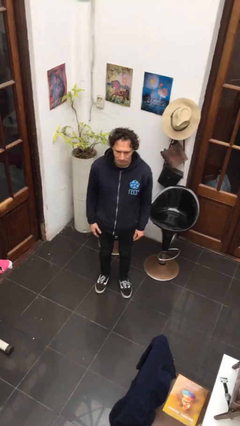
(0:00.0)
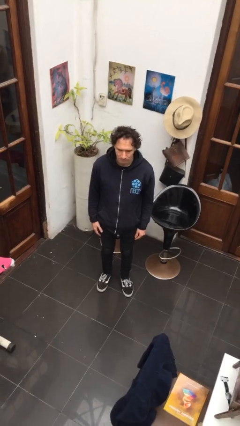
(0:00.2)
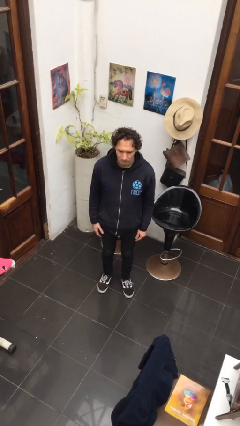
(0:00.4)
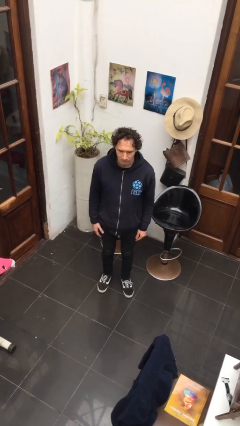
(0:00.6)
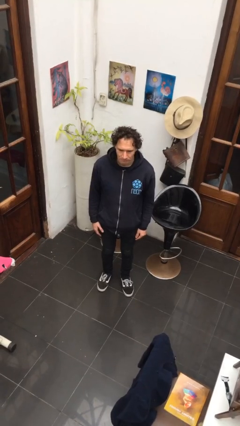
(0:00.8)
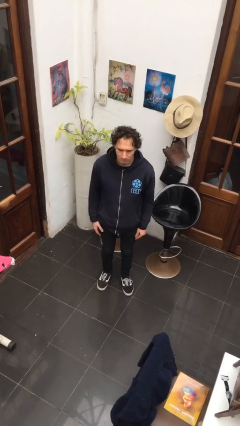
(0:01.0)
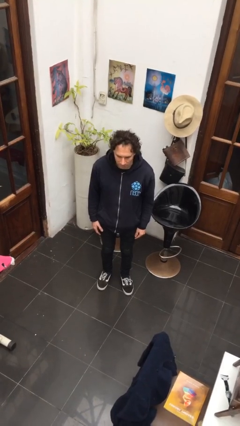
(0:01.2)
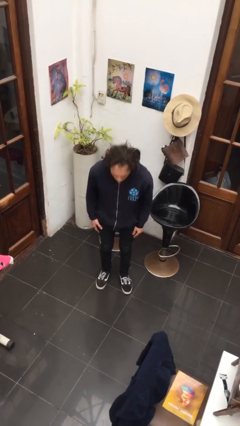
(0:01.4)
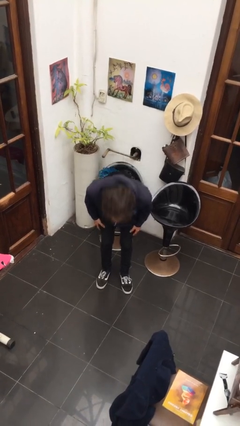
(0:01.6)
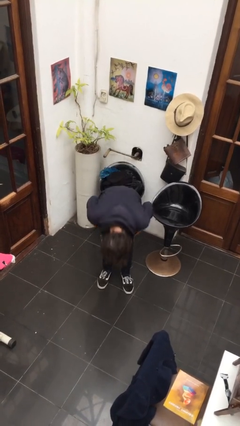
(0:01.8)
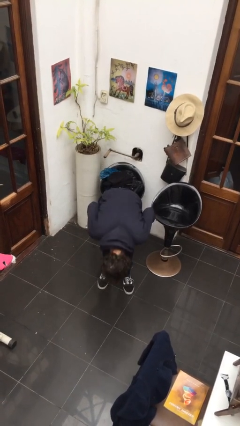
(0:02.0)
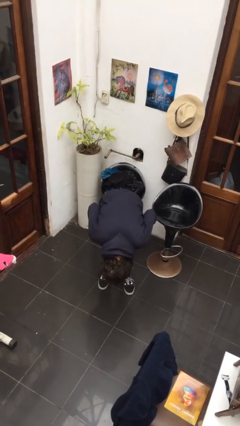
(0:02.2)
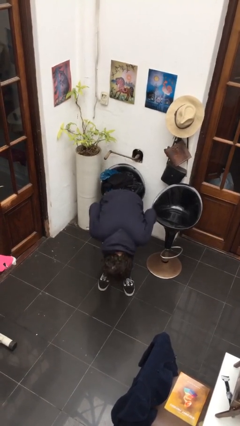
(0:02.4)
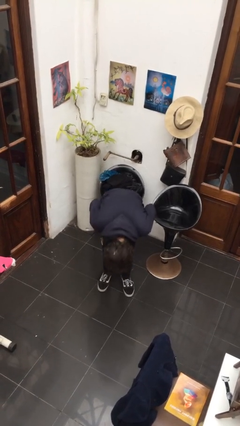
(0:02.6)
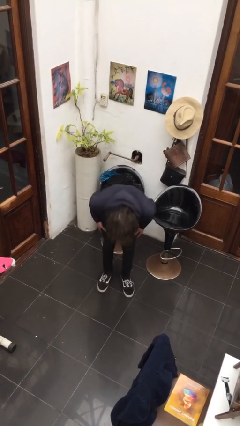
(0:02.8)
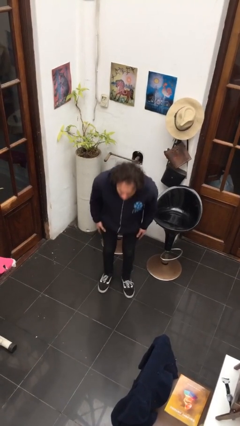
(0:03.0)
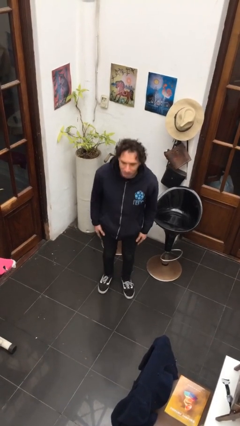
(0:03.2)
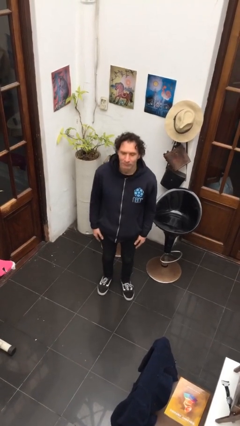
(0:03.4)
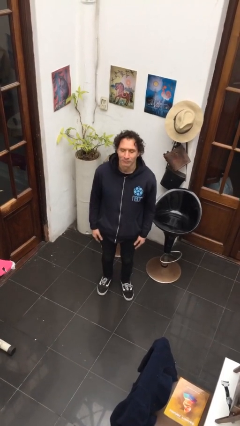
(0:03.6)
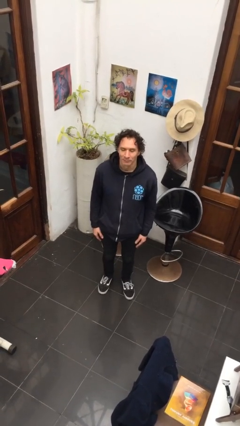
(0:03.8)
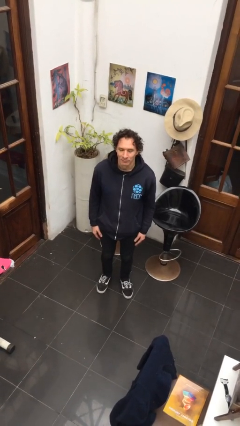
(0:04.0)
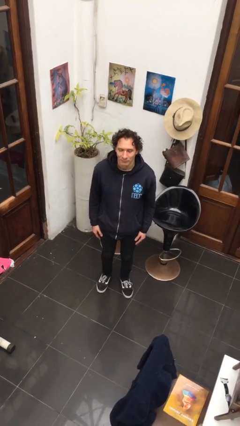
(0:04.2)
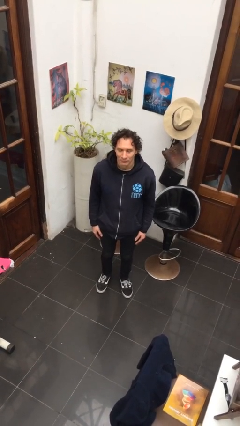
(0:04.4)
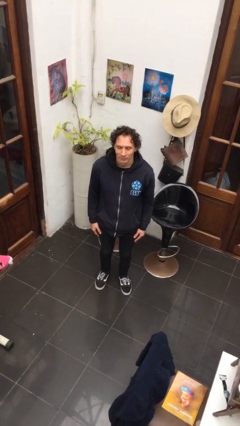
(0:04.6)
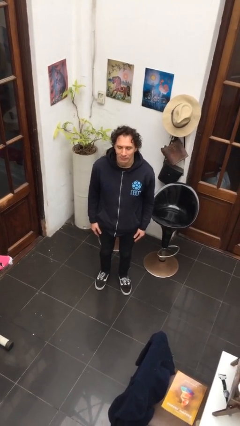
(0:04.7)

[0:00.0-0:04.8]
person bows

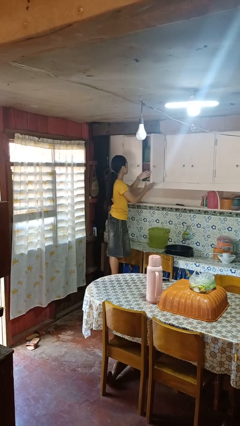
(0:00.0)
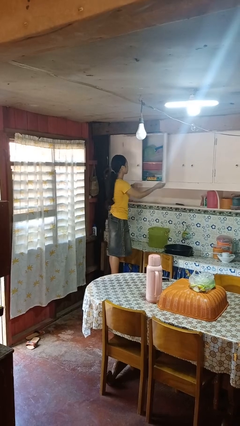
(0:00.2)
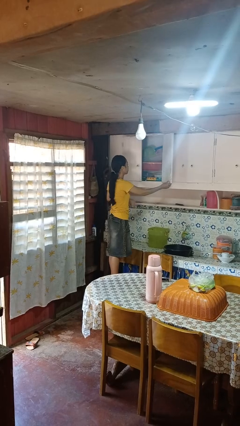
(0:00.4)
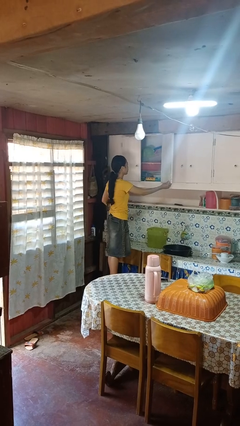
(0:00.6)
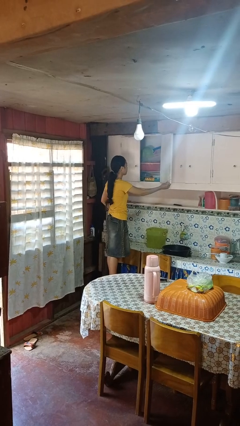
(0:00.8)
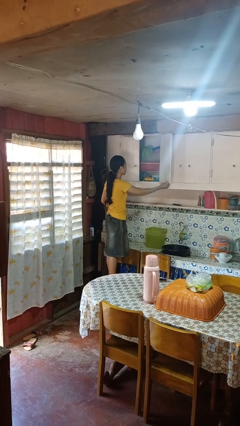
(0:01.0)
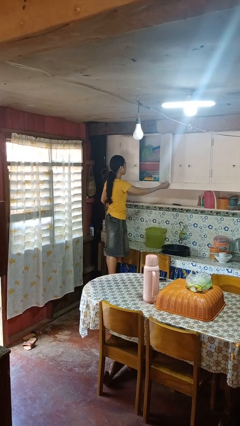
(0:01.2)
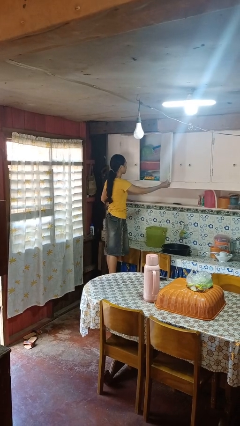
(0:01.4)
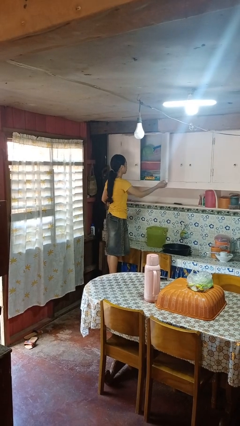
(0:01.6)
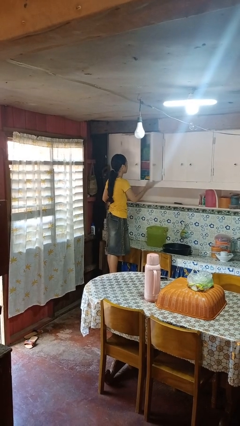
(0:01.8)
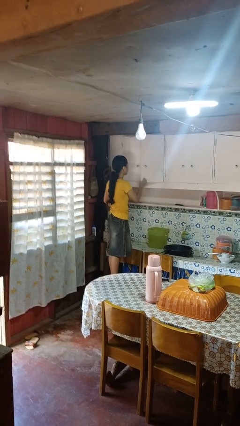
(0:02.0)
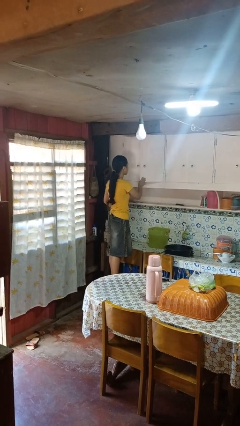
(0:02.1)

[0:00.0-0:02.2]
person opens cabinet

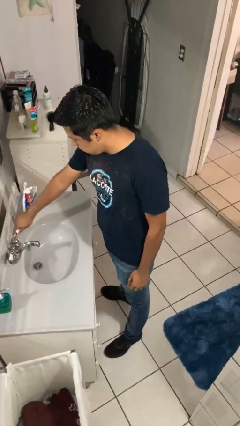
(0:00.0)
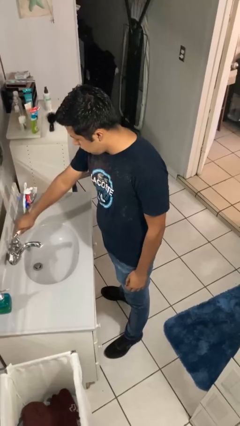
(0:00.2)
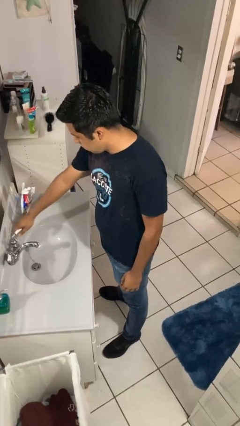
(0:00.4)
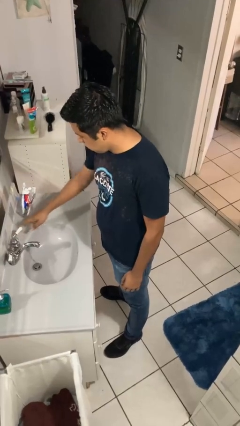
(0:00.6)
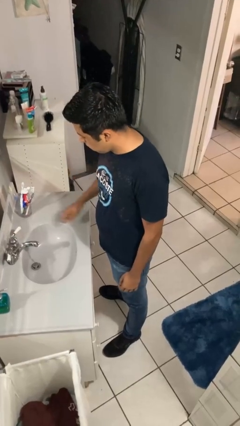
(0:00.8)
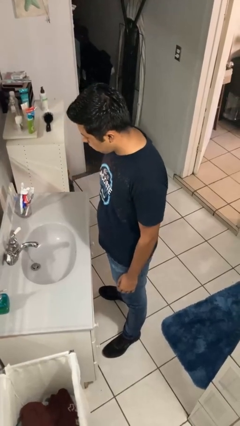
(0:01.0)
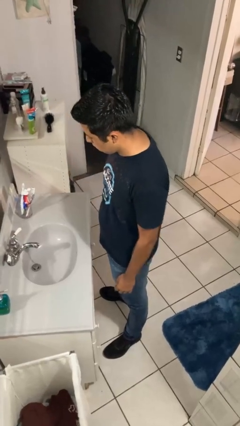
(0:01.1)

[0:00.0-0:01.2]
person turns on faucet

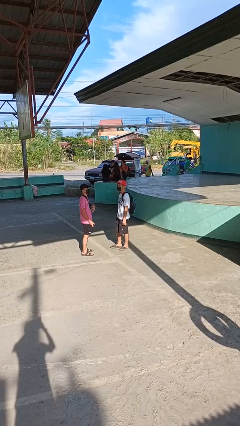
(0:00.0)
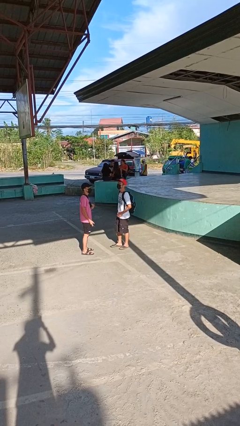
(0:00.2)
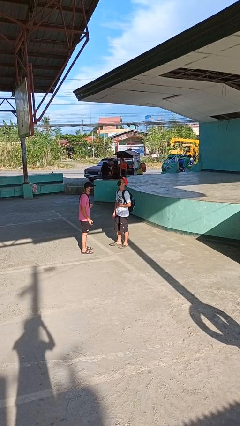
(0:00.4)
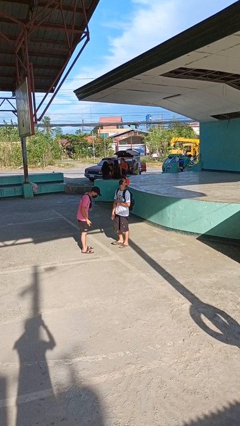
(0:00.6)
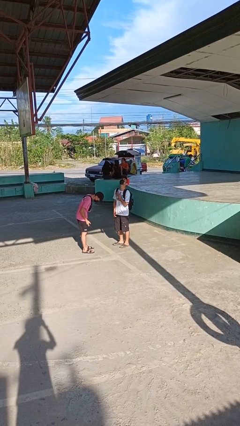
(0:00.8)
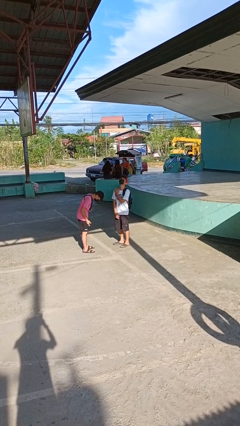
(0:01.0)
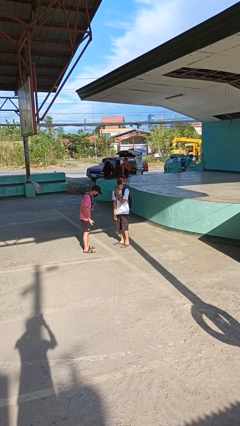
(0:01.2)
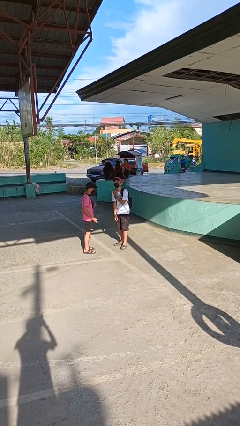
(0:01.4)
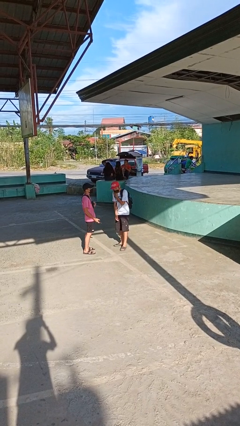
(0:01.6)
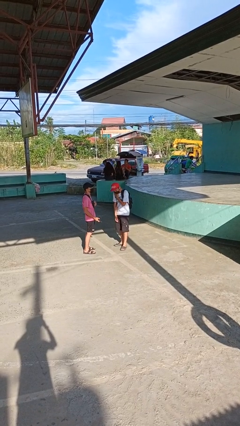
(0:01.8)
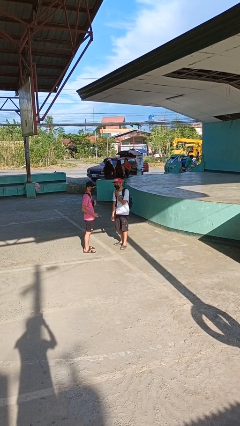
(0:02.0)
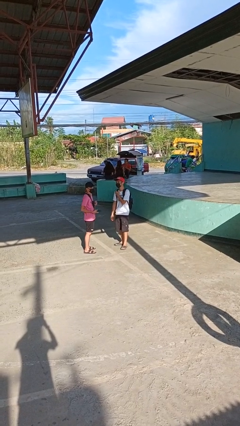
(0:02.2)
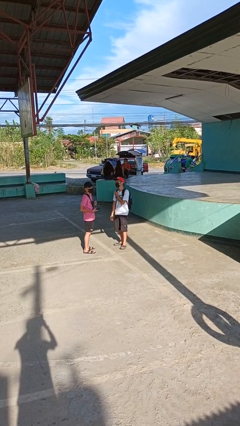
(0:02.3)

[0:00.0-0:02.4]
person laughs with person

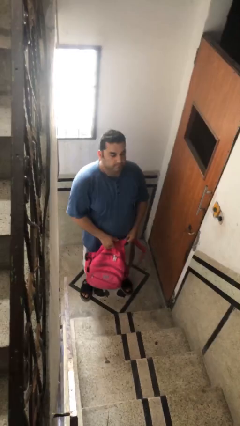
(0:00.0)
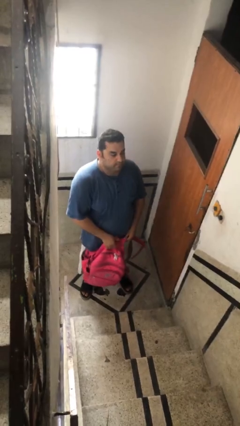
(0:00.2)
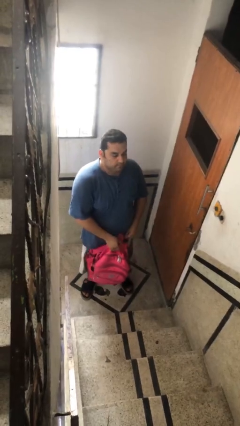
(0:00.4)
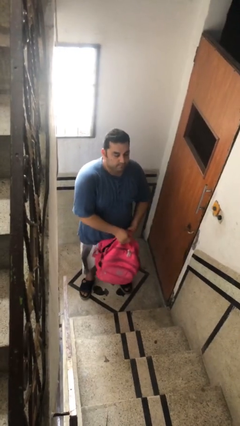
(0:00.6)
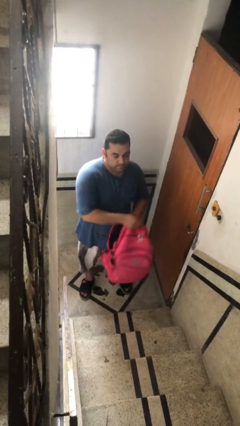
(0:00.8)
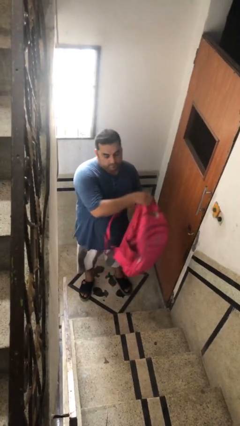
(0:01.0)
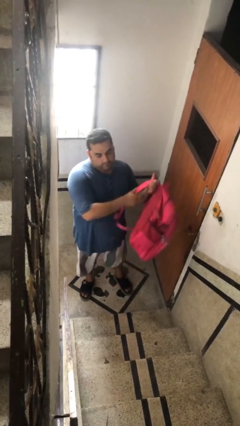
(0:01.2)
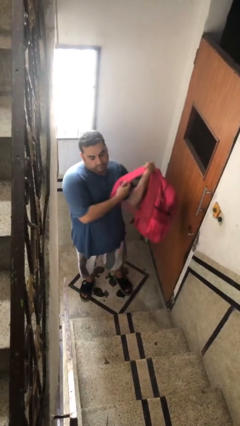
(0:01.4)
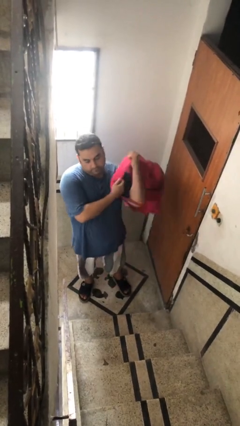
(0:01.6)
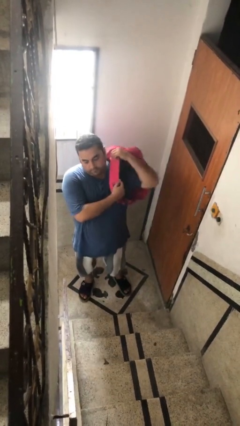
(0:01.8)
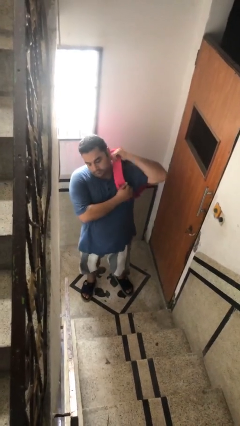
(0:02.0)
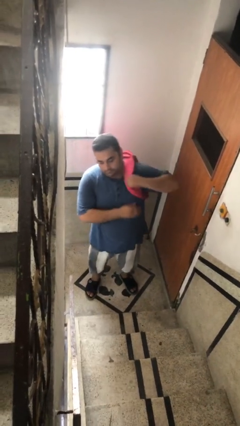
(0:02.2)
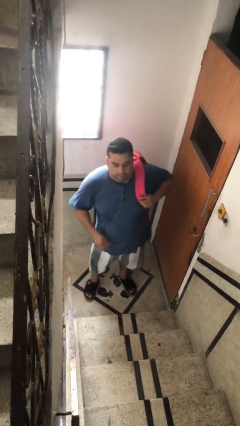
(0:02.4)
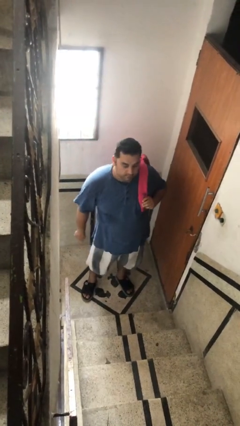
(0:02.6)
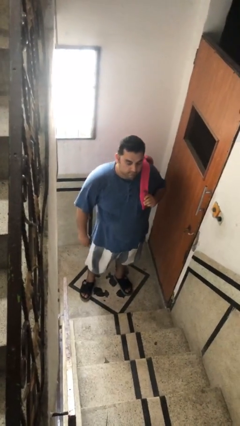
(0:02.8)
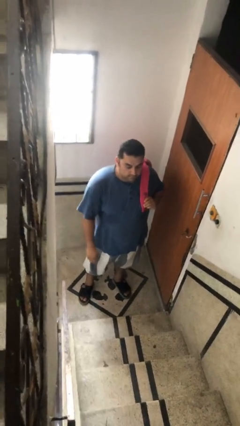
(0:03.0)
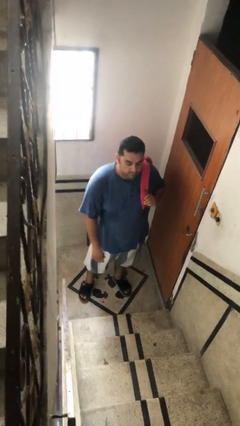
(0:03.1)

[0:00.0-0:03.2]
person puts on backpack

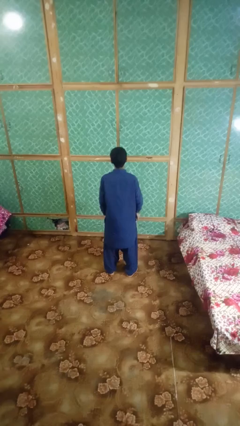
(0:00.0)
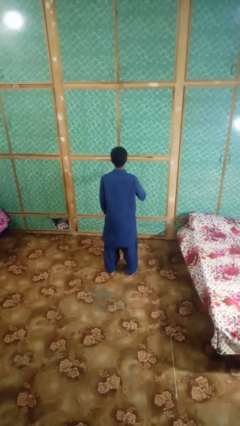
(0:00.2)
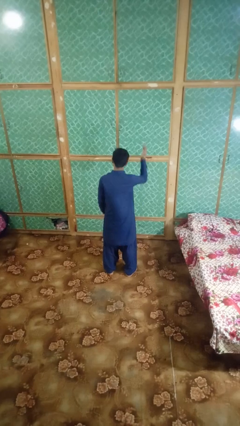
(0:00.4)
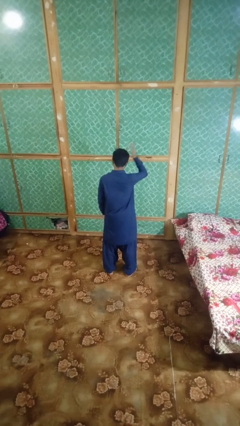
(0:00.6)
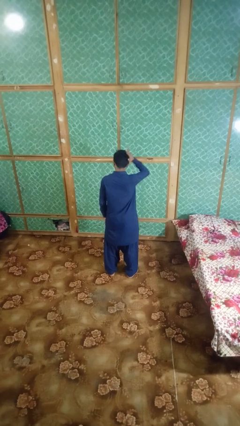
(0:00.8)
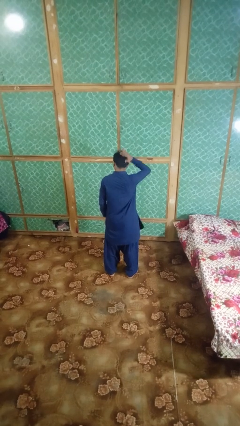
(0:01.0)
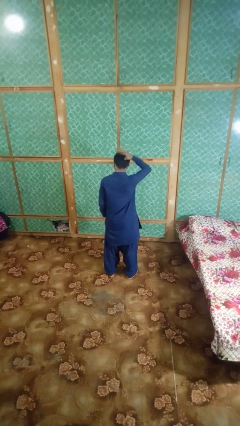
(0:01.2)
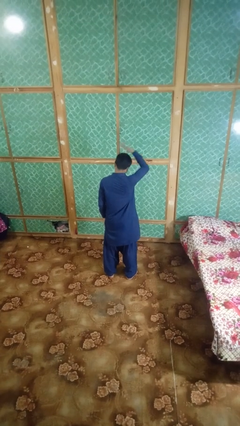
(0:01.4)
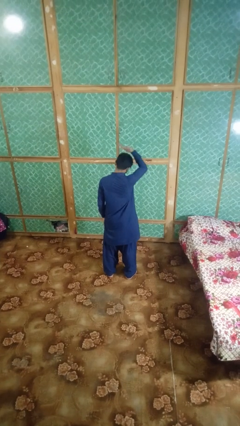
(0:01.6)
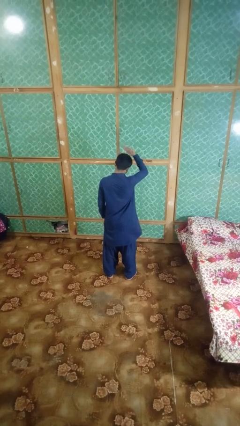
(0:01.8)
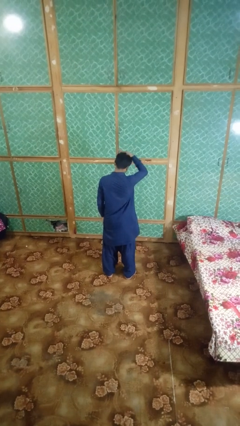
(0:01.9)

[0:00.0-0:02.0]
person pats head

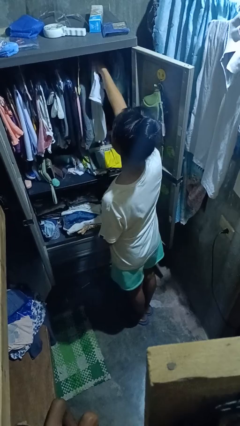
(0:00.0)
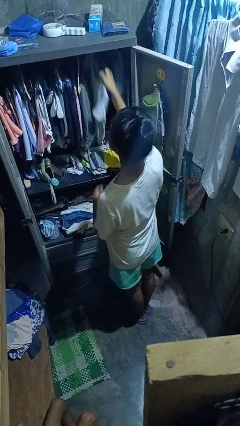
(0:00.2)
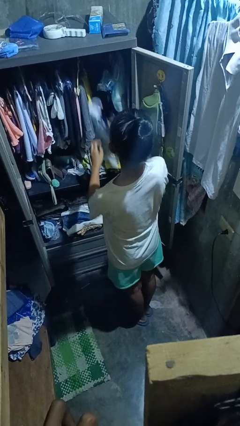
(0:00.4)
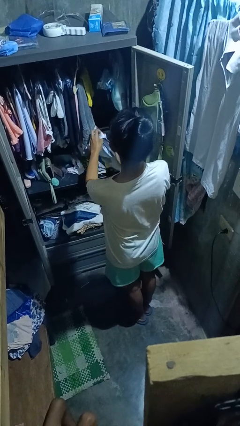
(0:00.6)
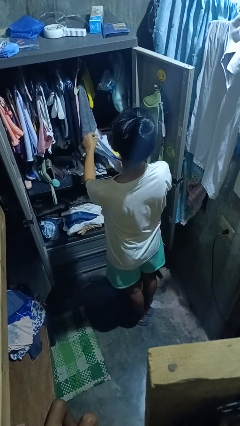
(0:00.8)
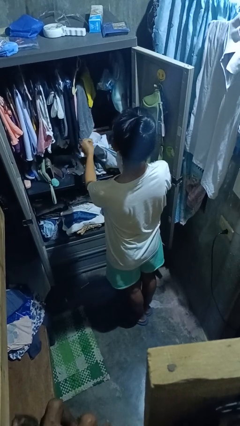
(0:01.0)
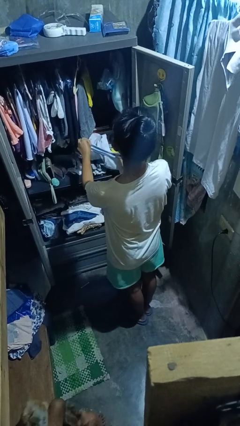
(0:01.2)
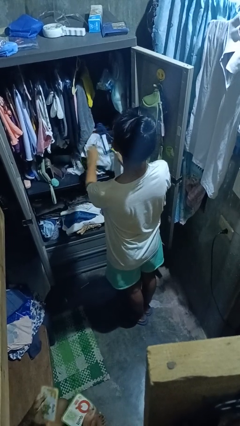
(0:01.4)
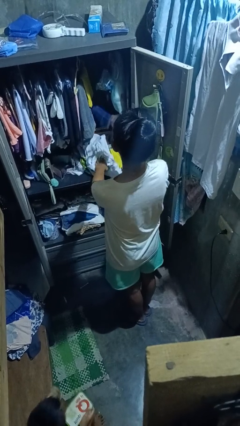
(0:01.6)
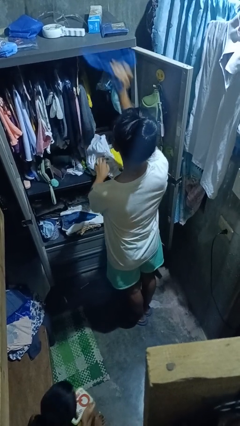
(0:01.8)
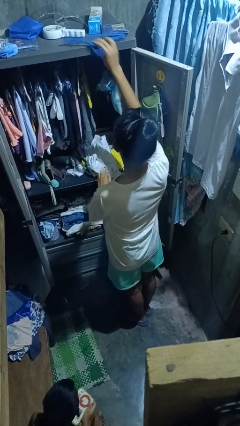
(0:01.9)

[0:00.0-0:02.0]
person takes clothes from closet
